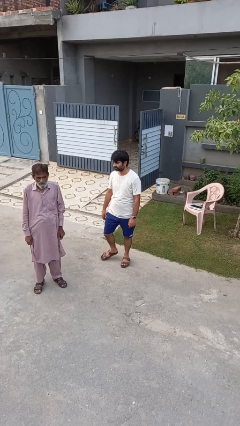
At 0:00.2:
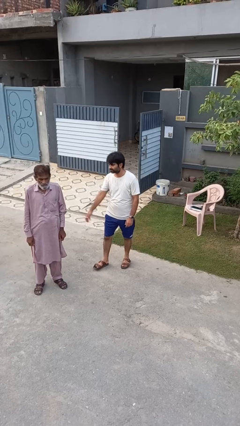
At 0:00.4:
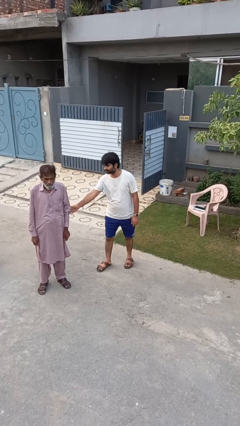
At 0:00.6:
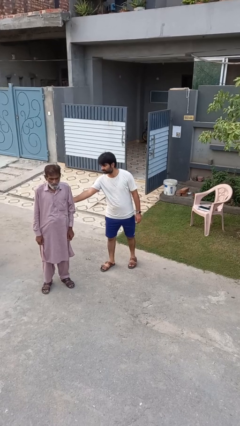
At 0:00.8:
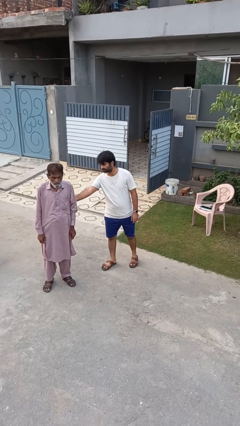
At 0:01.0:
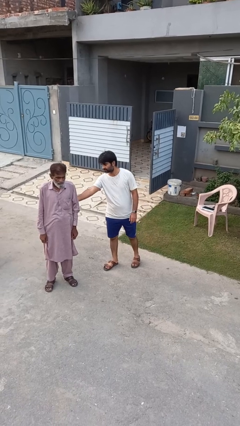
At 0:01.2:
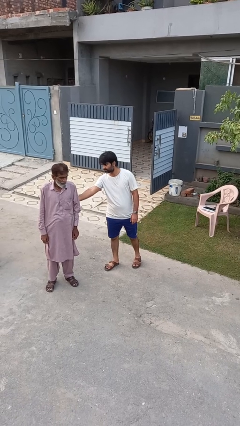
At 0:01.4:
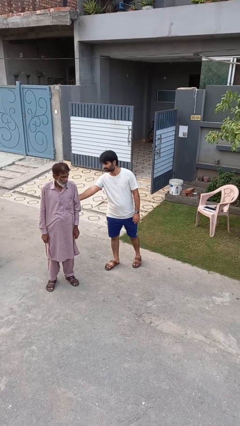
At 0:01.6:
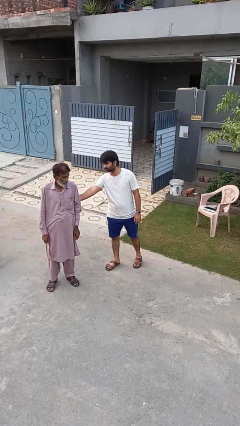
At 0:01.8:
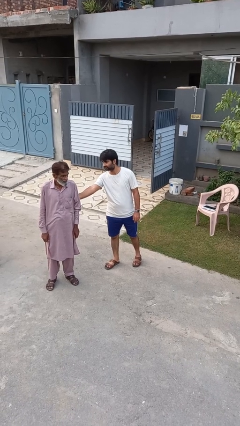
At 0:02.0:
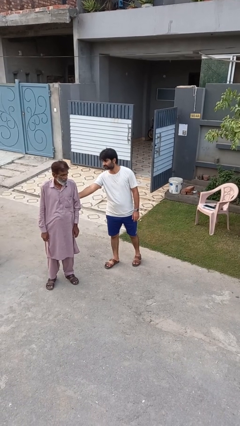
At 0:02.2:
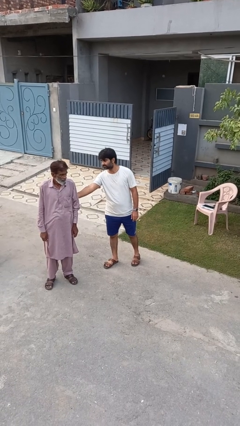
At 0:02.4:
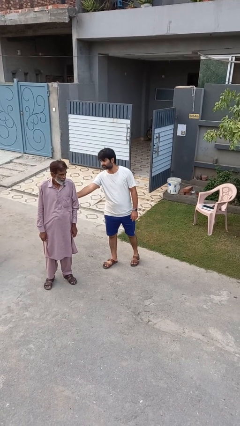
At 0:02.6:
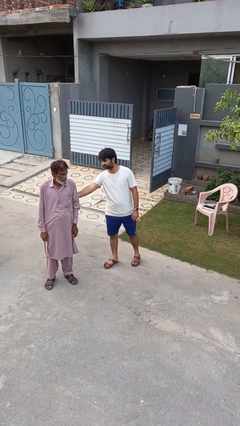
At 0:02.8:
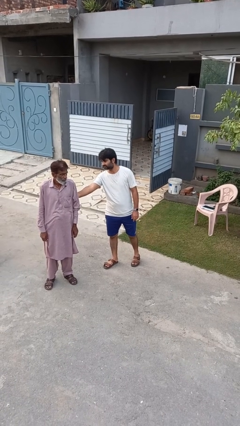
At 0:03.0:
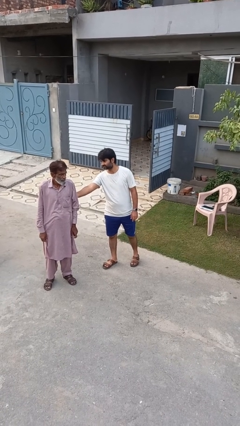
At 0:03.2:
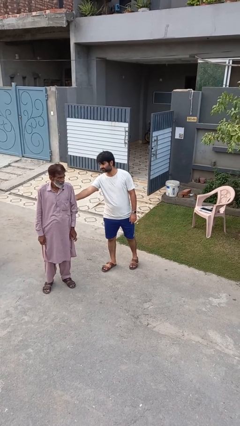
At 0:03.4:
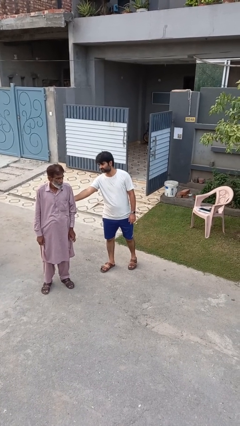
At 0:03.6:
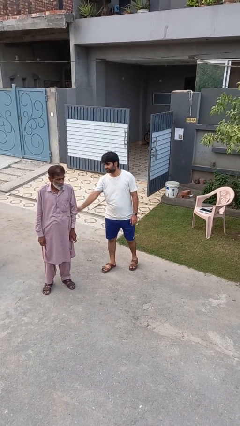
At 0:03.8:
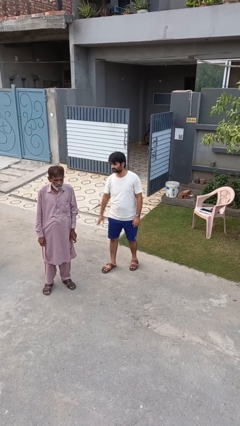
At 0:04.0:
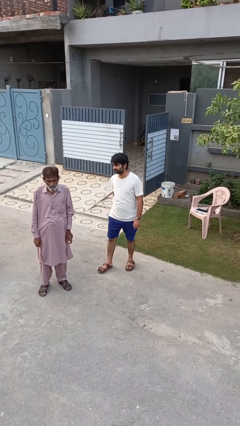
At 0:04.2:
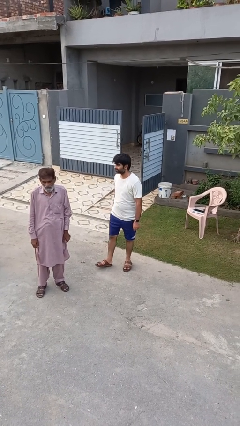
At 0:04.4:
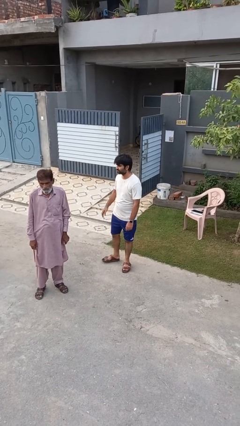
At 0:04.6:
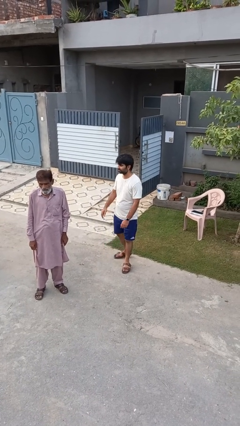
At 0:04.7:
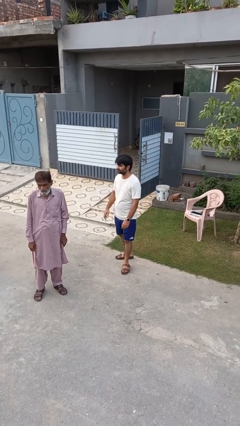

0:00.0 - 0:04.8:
person touches back of person

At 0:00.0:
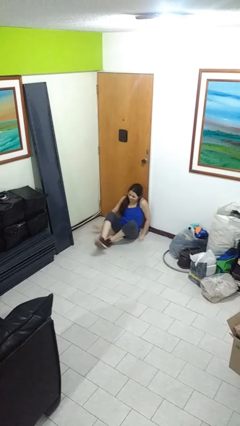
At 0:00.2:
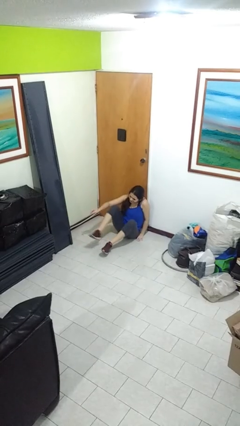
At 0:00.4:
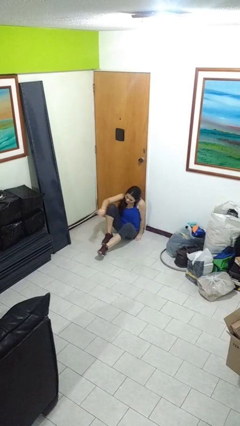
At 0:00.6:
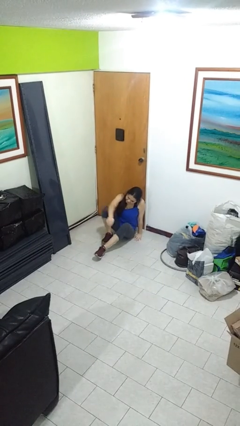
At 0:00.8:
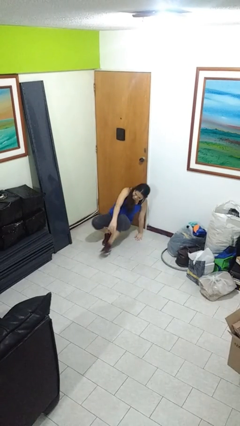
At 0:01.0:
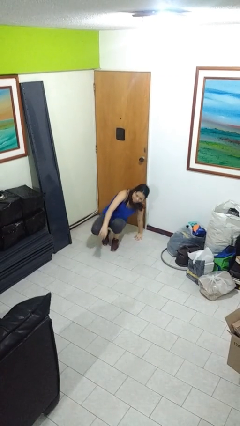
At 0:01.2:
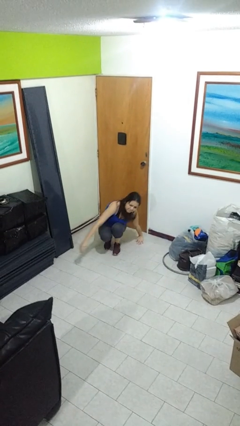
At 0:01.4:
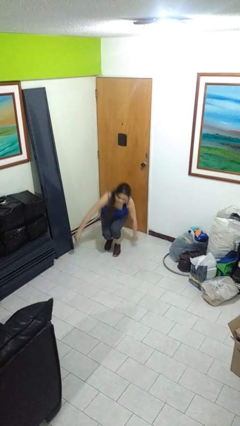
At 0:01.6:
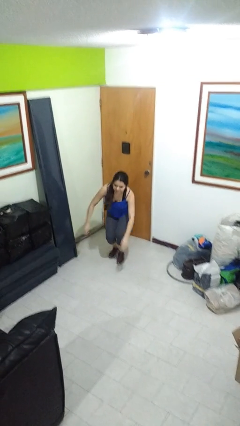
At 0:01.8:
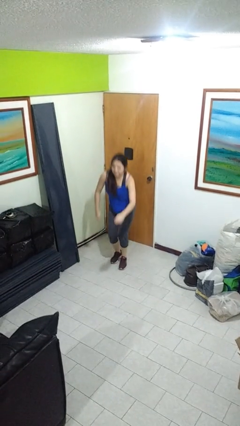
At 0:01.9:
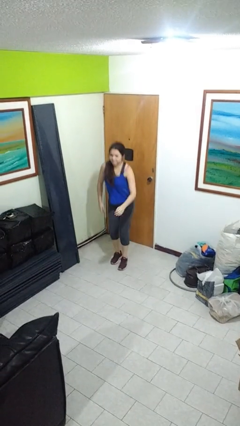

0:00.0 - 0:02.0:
person stands up from floor

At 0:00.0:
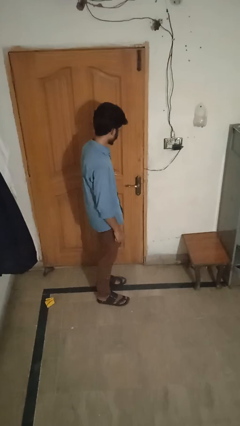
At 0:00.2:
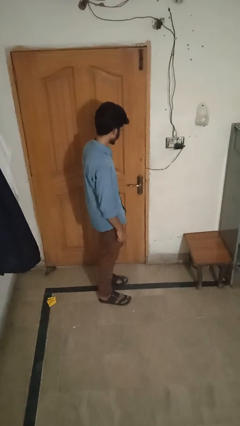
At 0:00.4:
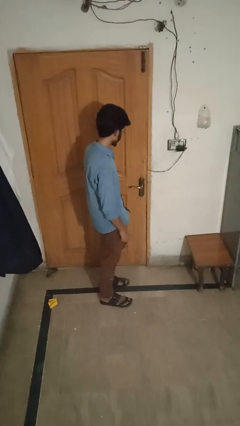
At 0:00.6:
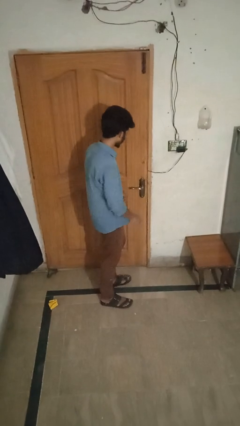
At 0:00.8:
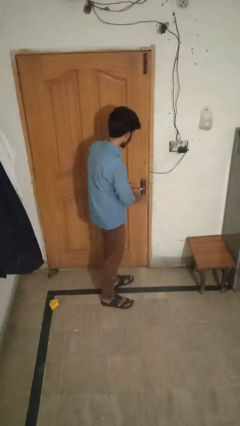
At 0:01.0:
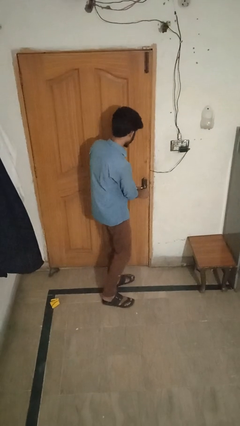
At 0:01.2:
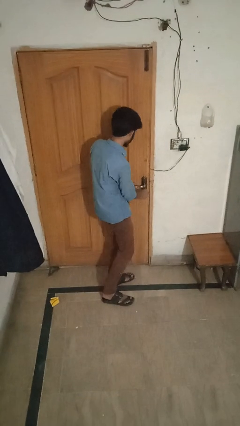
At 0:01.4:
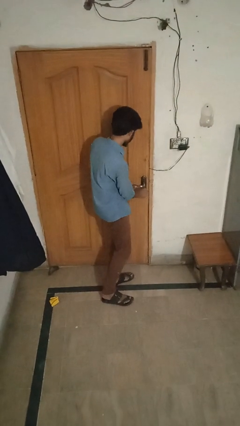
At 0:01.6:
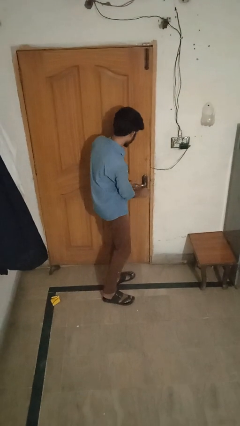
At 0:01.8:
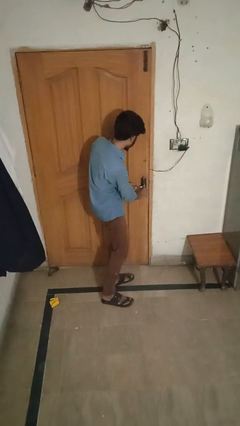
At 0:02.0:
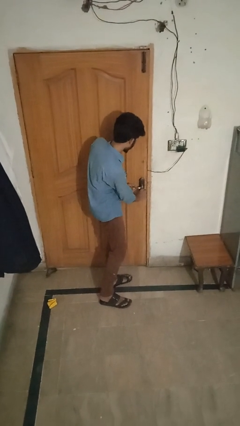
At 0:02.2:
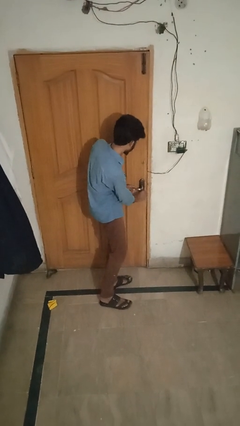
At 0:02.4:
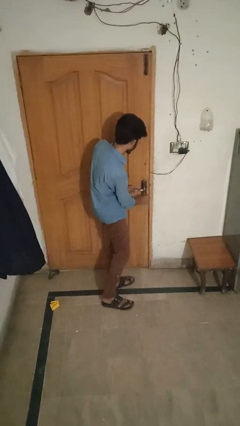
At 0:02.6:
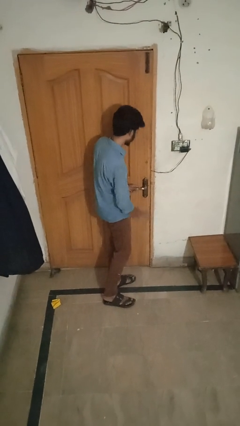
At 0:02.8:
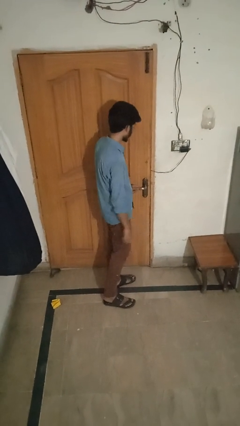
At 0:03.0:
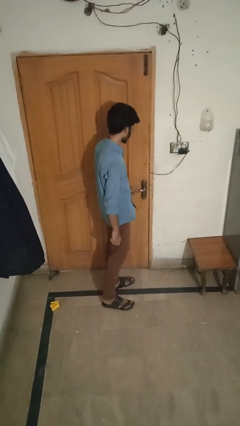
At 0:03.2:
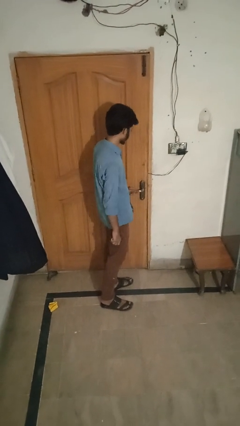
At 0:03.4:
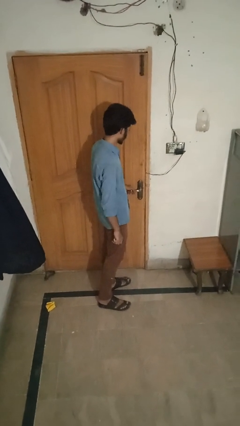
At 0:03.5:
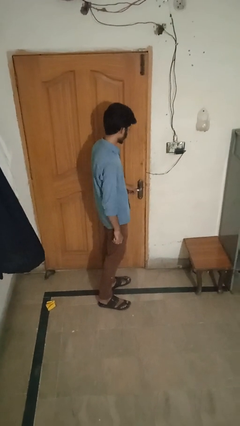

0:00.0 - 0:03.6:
person unlocks door with keys

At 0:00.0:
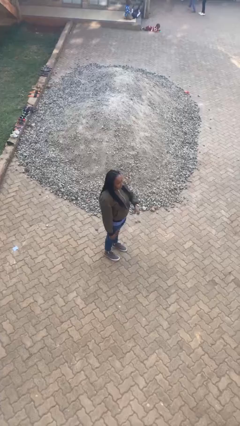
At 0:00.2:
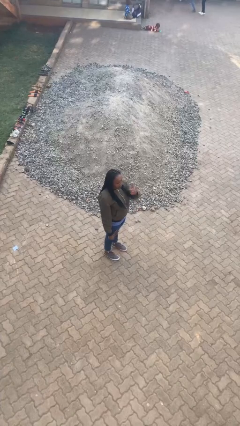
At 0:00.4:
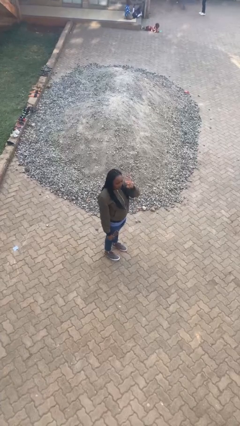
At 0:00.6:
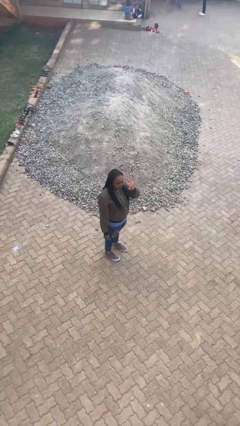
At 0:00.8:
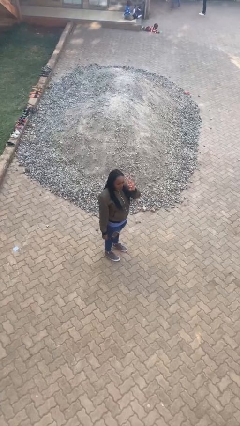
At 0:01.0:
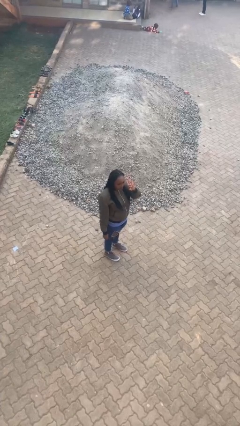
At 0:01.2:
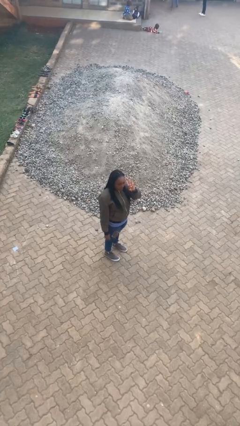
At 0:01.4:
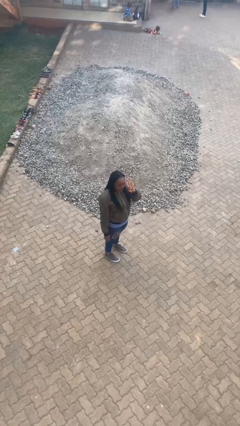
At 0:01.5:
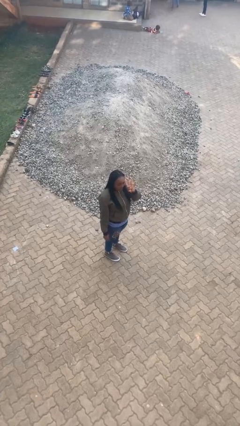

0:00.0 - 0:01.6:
person gestures number four

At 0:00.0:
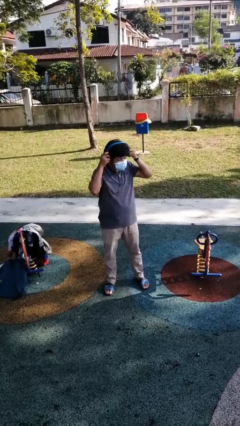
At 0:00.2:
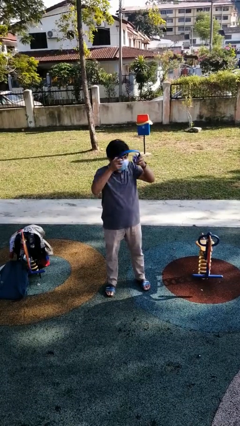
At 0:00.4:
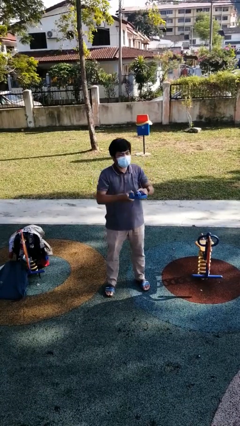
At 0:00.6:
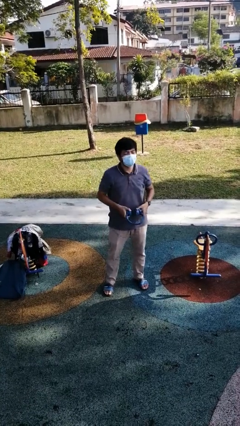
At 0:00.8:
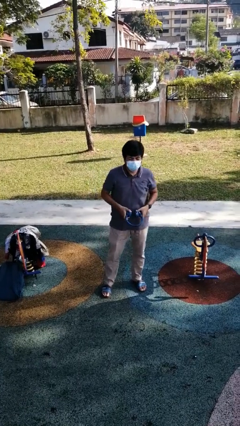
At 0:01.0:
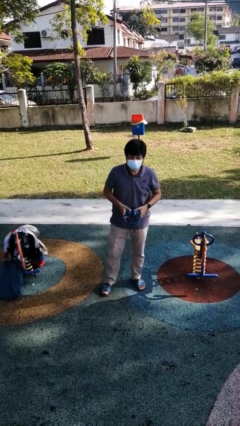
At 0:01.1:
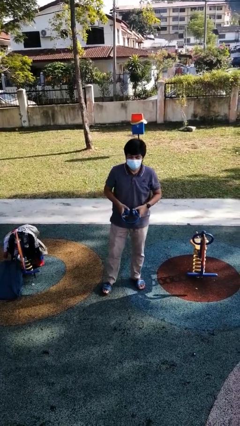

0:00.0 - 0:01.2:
person takes off headphones

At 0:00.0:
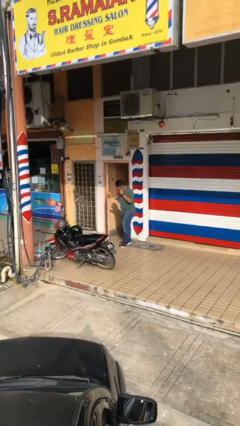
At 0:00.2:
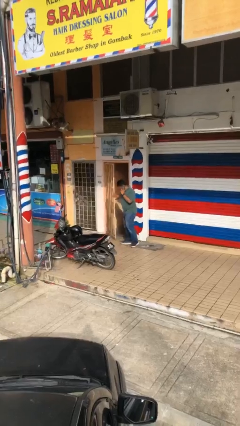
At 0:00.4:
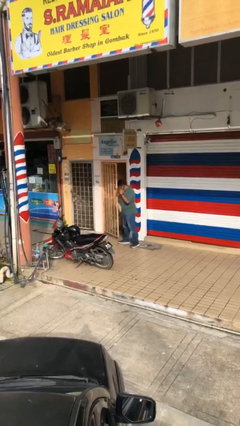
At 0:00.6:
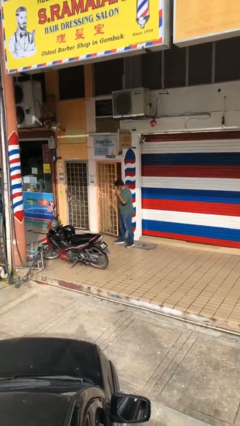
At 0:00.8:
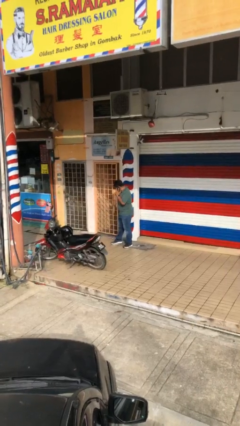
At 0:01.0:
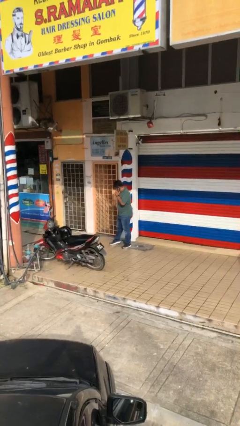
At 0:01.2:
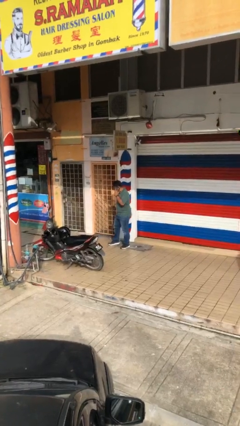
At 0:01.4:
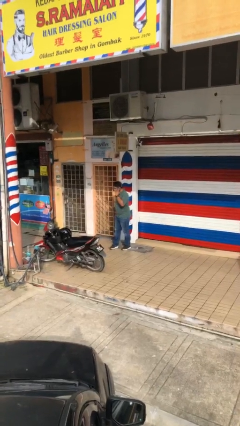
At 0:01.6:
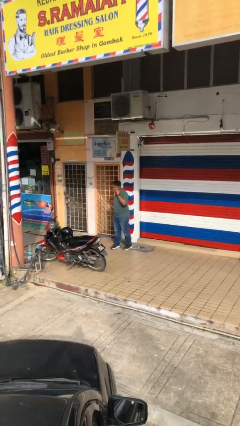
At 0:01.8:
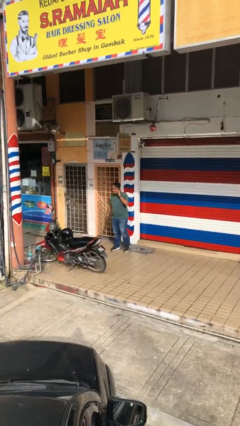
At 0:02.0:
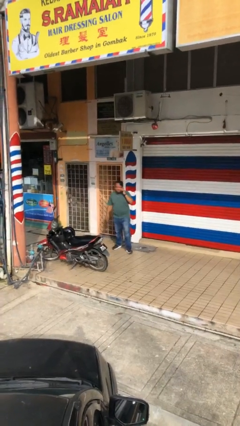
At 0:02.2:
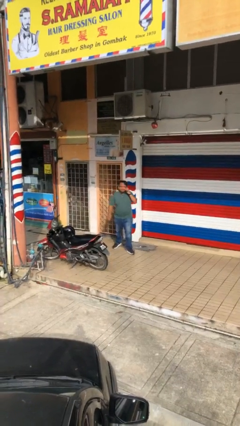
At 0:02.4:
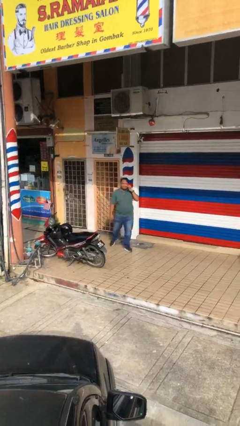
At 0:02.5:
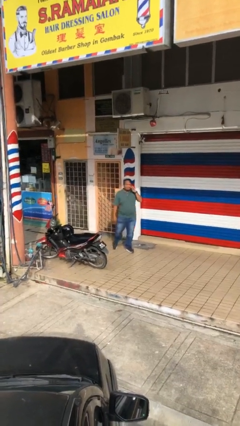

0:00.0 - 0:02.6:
person closes facility door

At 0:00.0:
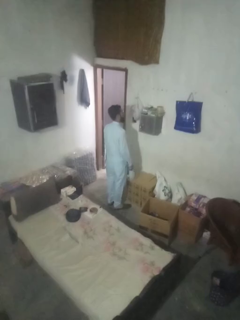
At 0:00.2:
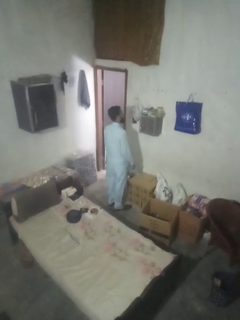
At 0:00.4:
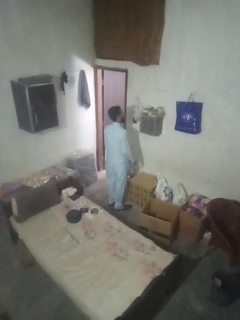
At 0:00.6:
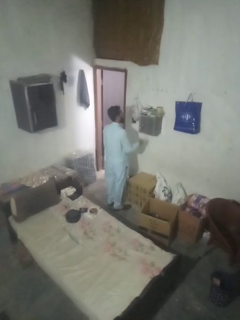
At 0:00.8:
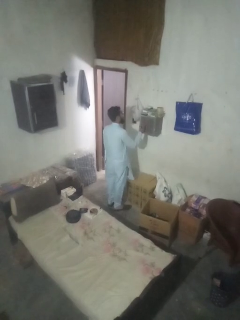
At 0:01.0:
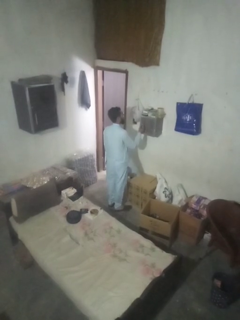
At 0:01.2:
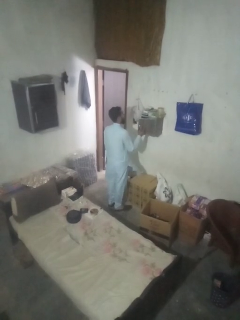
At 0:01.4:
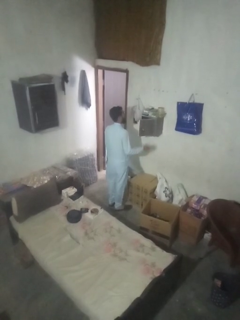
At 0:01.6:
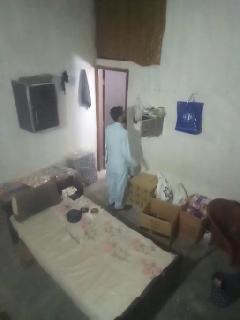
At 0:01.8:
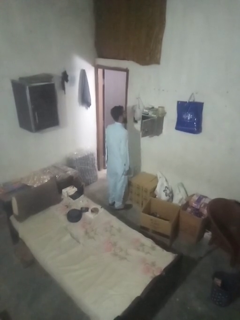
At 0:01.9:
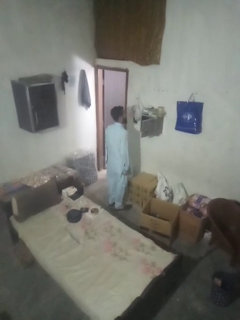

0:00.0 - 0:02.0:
person opens mailbox
